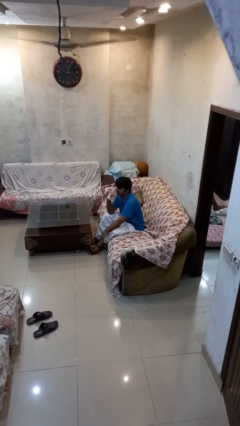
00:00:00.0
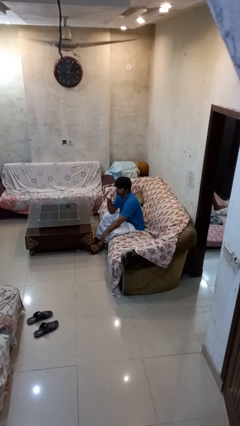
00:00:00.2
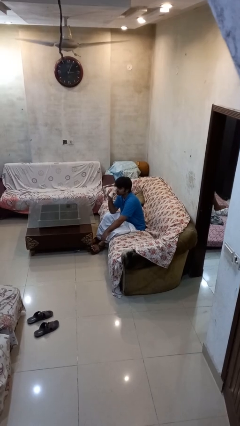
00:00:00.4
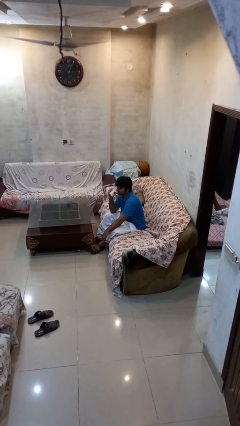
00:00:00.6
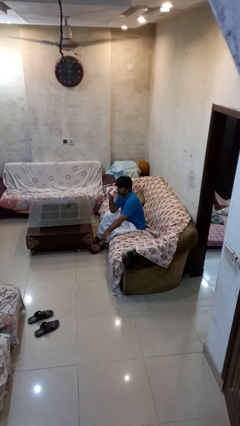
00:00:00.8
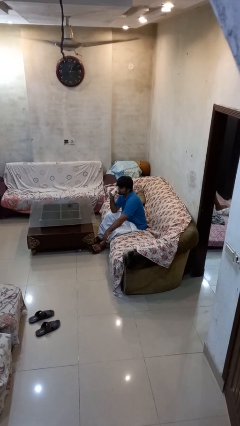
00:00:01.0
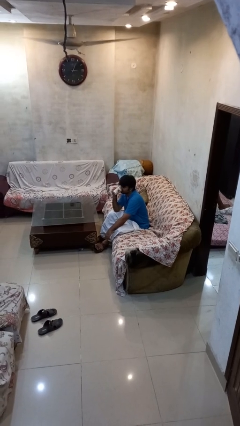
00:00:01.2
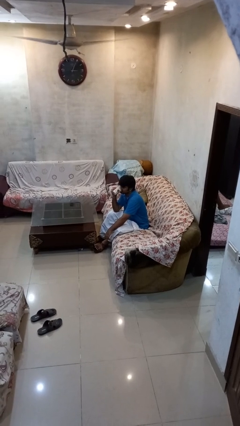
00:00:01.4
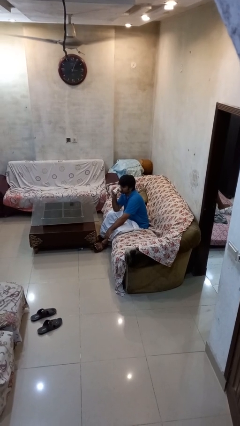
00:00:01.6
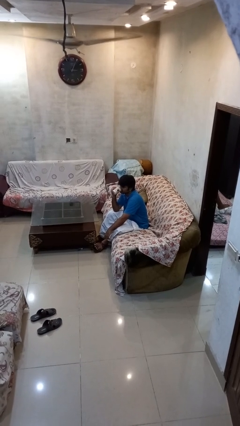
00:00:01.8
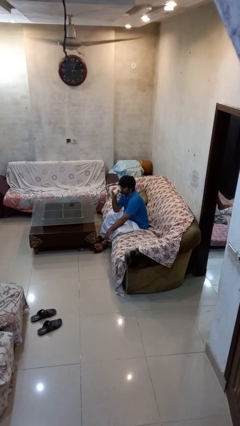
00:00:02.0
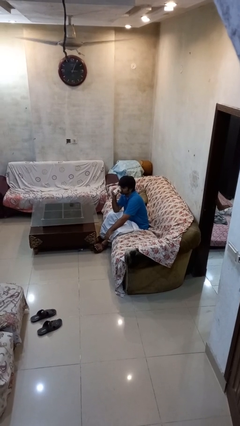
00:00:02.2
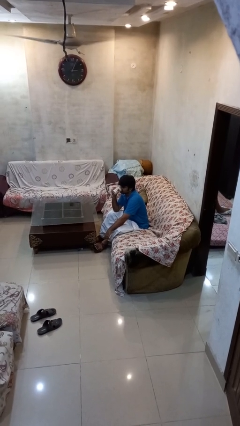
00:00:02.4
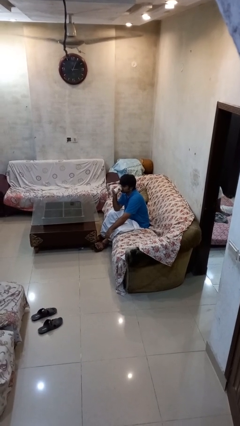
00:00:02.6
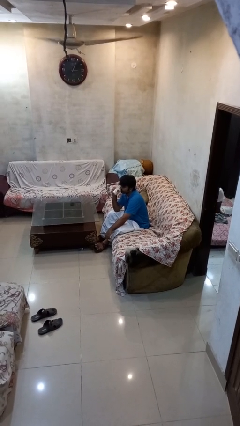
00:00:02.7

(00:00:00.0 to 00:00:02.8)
person drinks from mug

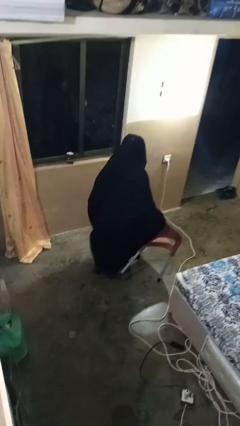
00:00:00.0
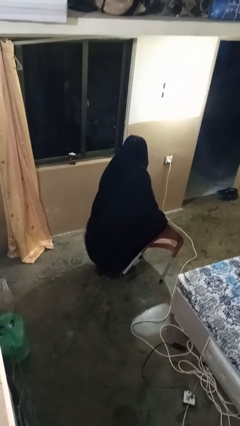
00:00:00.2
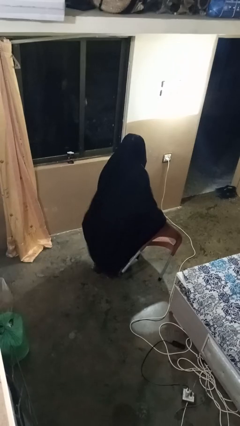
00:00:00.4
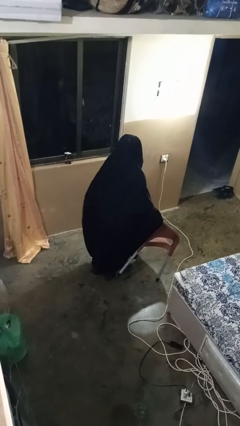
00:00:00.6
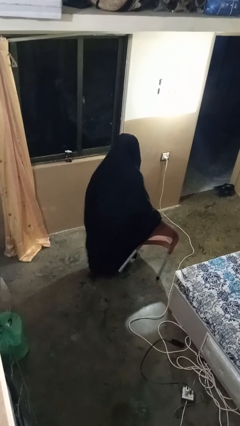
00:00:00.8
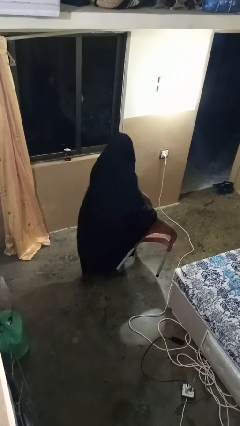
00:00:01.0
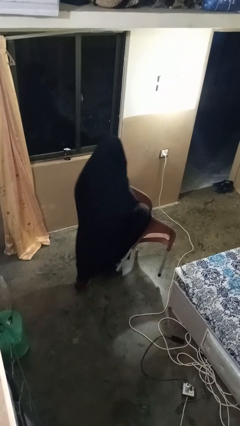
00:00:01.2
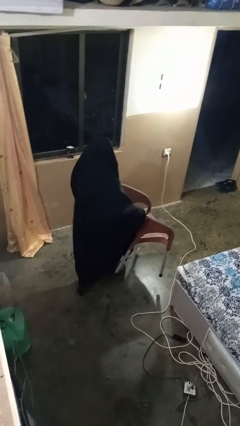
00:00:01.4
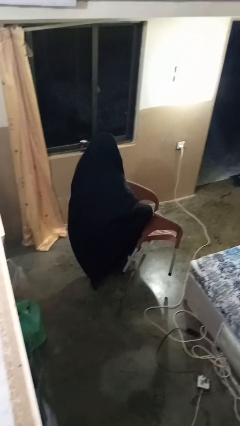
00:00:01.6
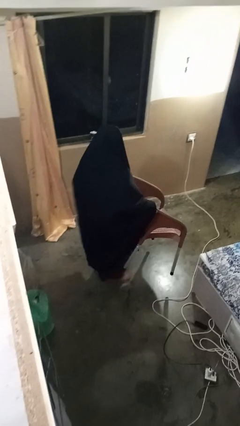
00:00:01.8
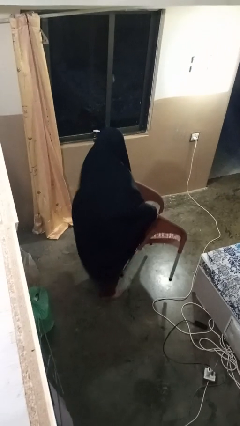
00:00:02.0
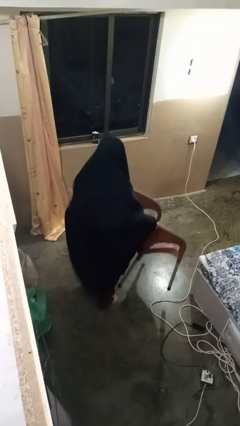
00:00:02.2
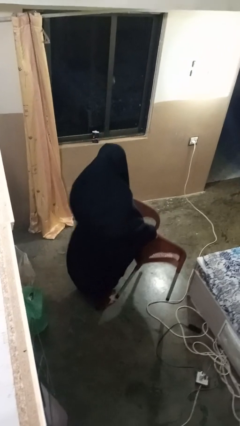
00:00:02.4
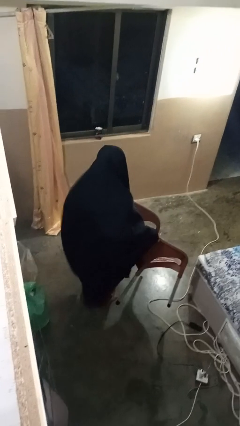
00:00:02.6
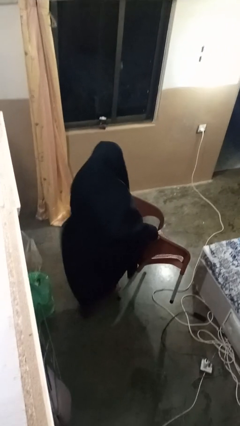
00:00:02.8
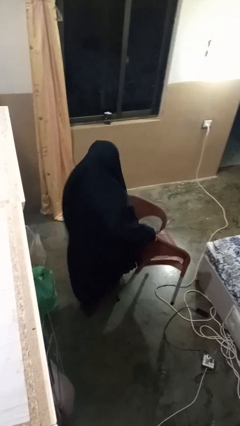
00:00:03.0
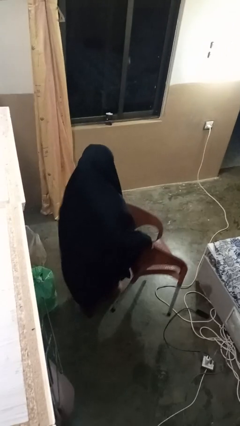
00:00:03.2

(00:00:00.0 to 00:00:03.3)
person carries furniture

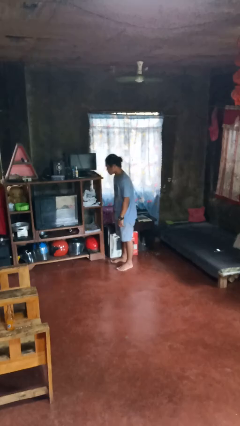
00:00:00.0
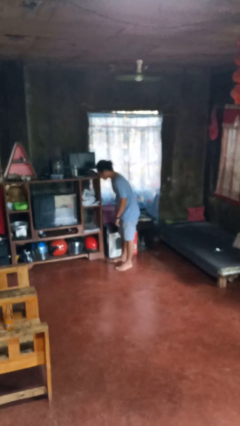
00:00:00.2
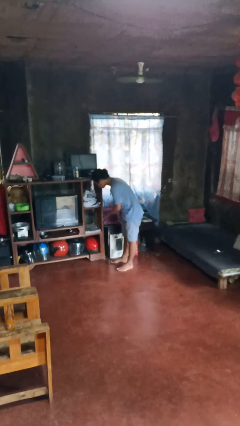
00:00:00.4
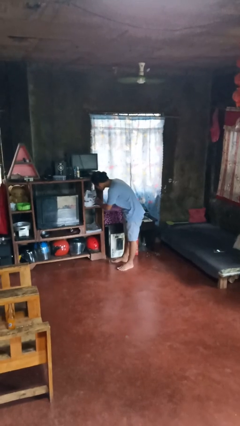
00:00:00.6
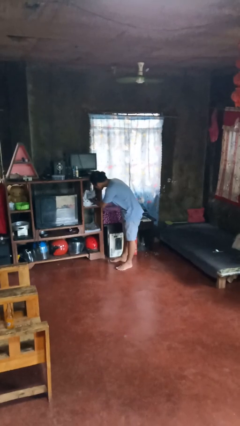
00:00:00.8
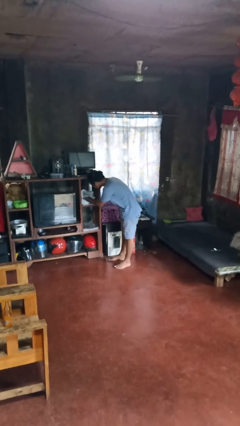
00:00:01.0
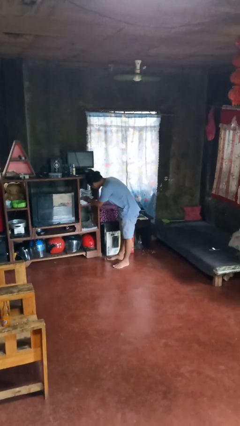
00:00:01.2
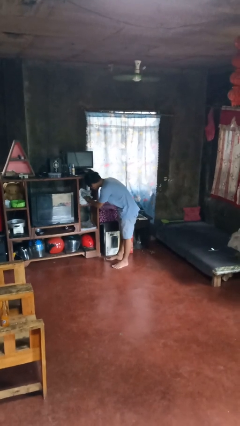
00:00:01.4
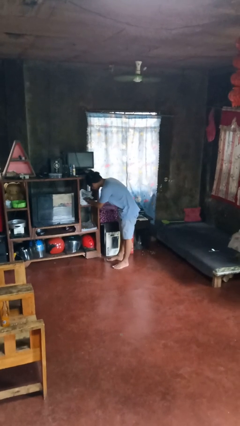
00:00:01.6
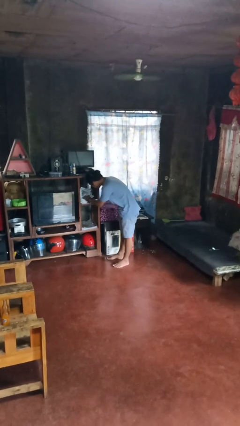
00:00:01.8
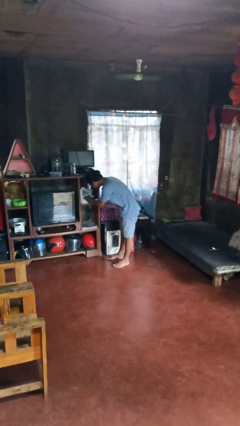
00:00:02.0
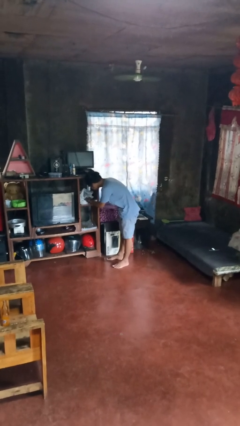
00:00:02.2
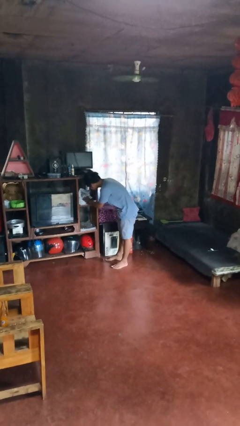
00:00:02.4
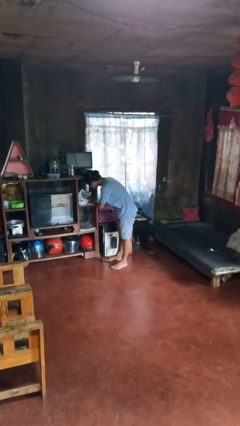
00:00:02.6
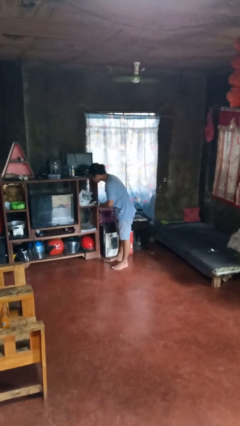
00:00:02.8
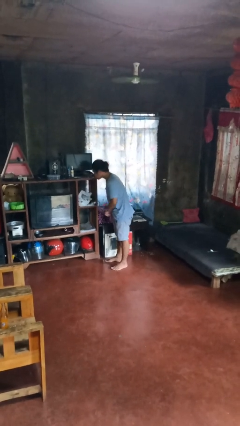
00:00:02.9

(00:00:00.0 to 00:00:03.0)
person searches in cabinet

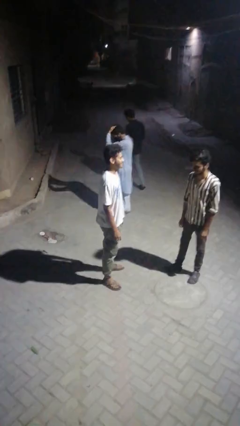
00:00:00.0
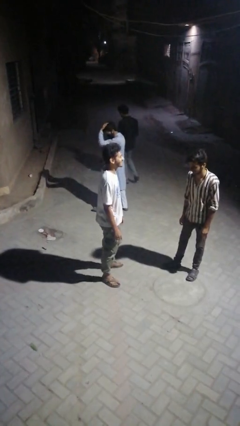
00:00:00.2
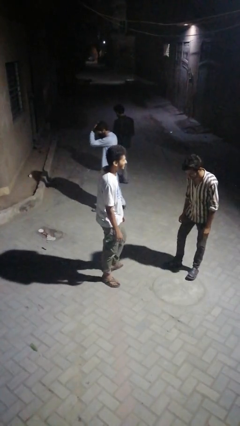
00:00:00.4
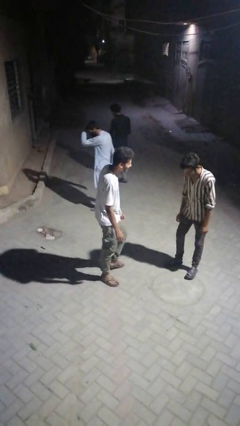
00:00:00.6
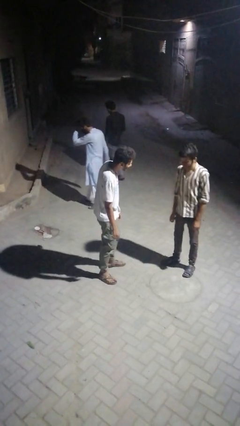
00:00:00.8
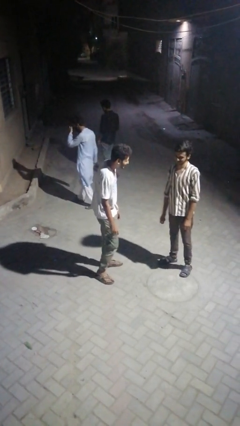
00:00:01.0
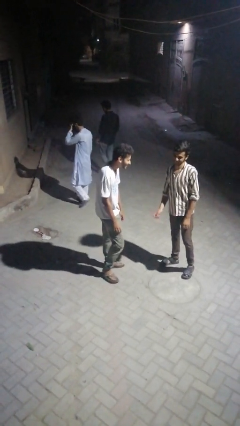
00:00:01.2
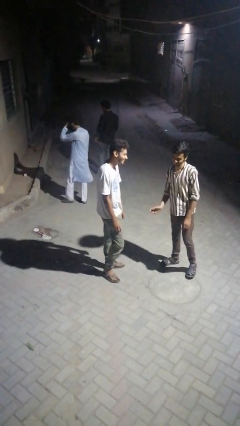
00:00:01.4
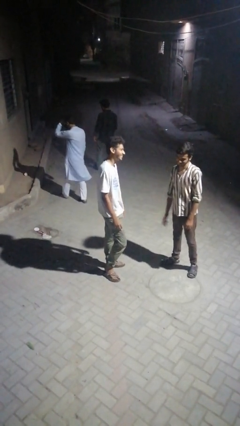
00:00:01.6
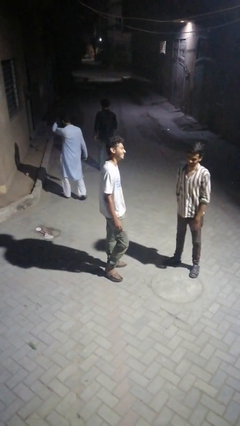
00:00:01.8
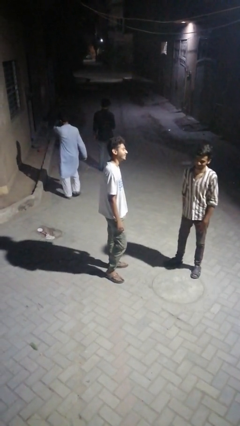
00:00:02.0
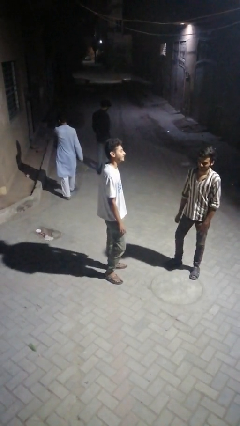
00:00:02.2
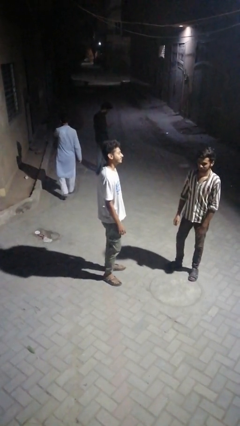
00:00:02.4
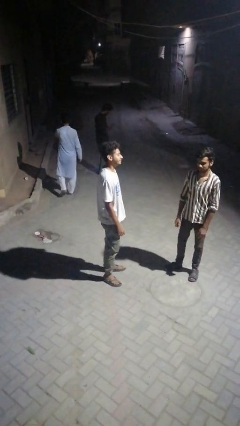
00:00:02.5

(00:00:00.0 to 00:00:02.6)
person laughs with person

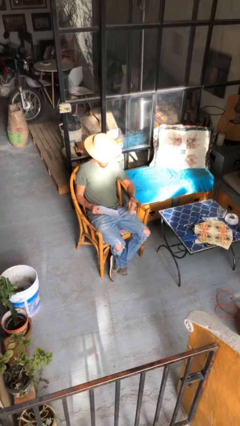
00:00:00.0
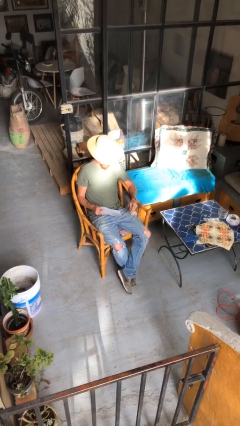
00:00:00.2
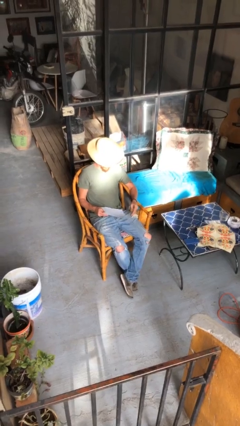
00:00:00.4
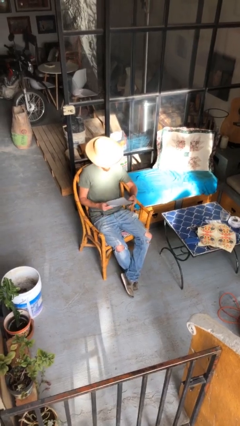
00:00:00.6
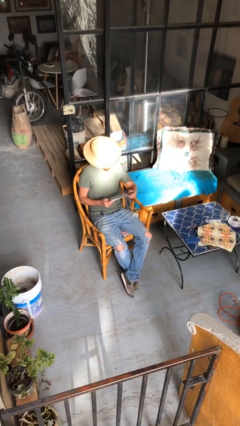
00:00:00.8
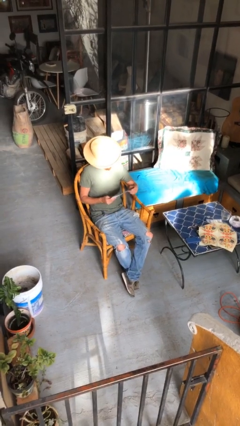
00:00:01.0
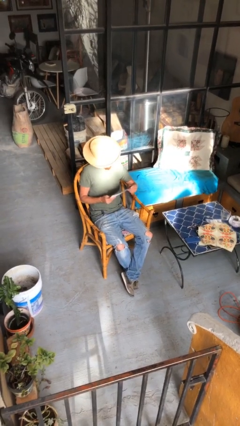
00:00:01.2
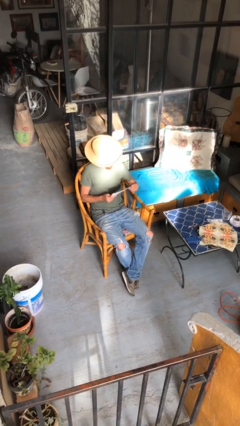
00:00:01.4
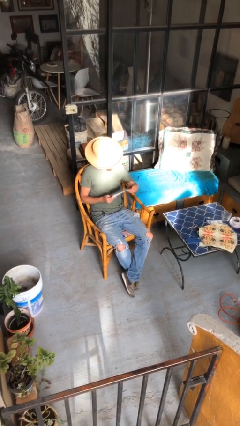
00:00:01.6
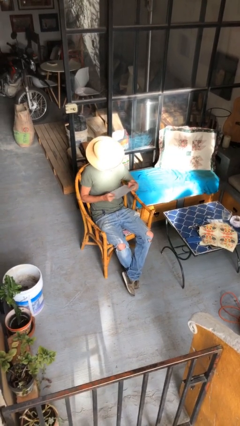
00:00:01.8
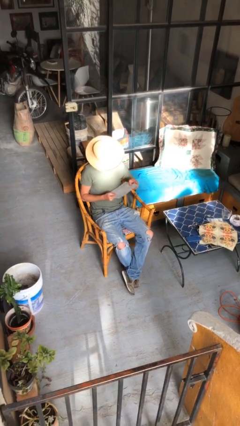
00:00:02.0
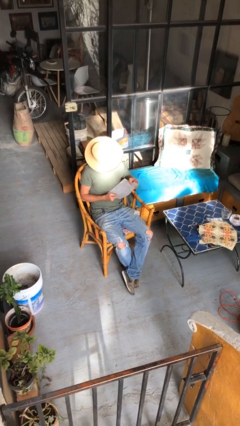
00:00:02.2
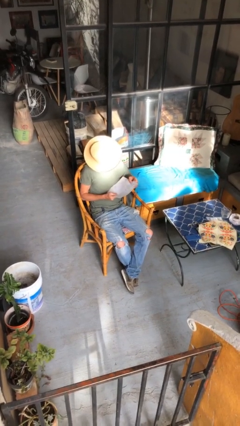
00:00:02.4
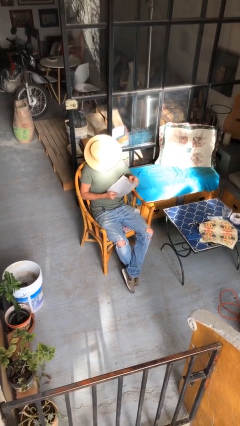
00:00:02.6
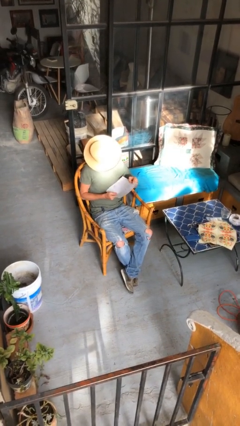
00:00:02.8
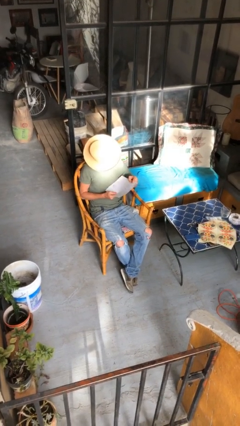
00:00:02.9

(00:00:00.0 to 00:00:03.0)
person reads document

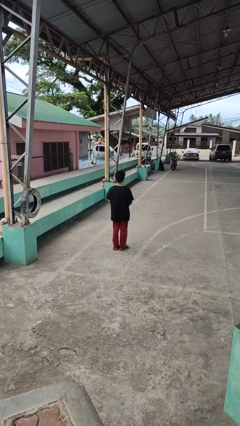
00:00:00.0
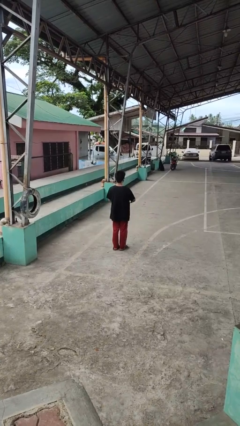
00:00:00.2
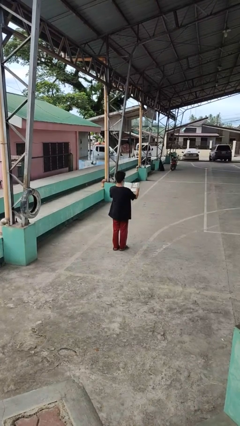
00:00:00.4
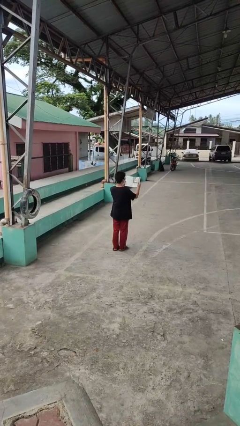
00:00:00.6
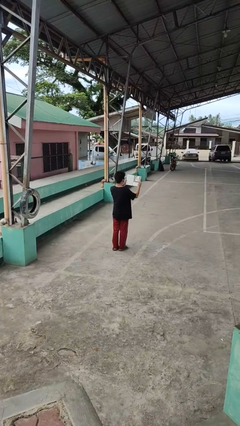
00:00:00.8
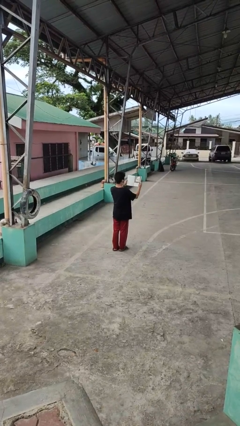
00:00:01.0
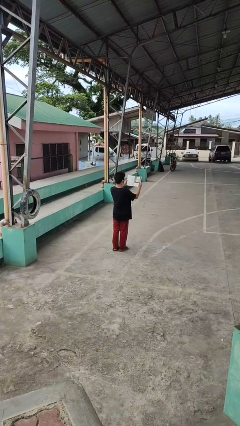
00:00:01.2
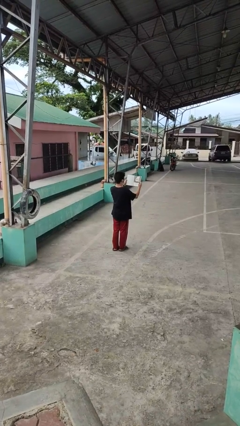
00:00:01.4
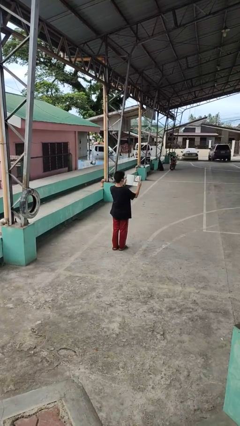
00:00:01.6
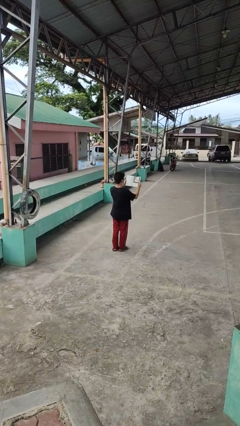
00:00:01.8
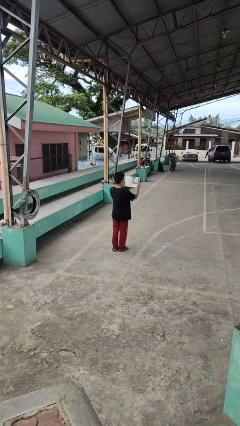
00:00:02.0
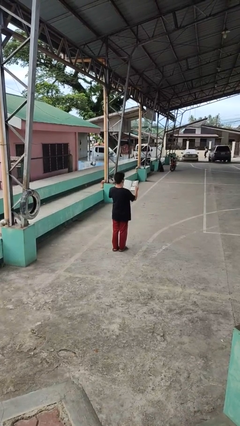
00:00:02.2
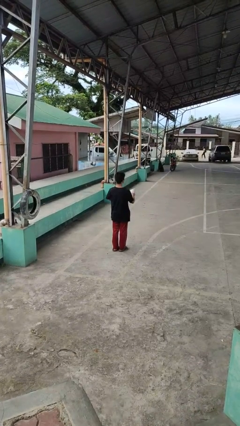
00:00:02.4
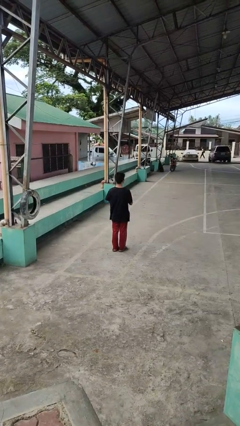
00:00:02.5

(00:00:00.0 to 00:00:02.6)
person reads book
